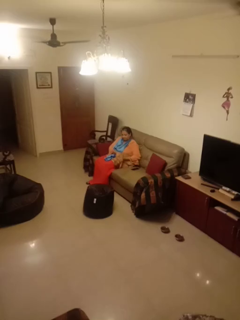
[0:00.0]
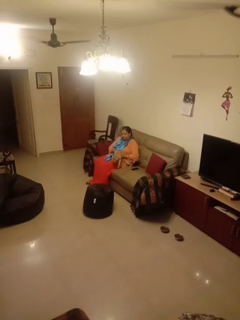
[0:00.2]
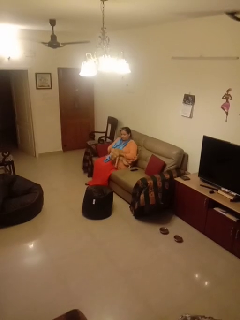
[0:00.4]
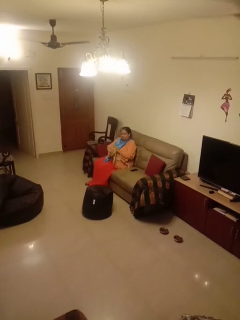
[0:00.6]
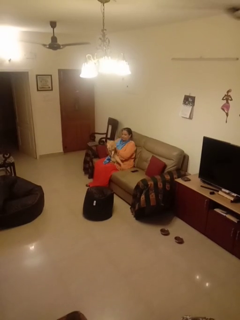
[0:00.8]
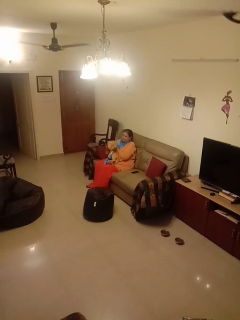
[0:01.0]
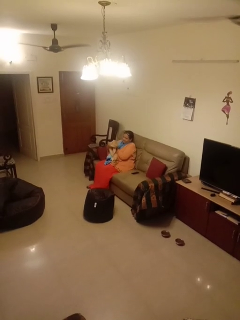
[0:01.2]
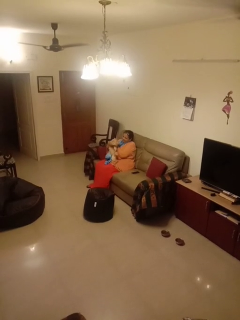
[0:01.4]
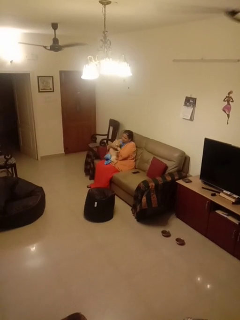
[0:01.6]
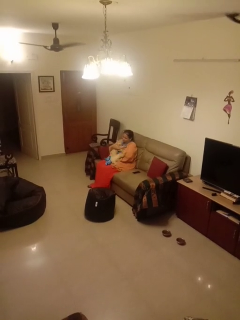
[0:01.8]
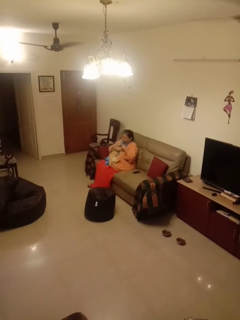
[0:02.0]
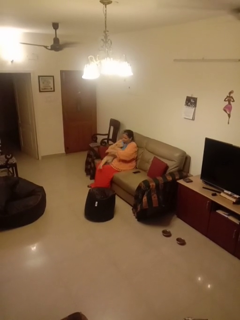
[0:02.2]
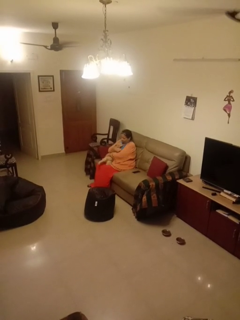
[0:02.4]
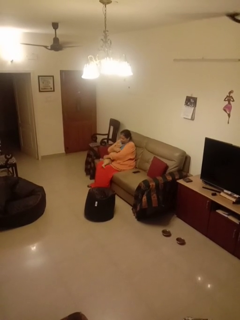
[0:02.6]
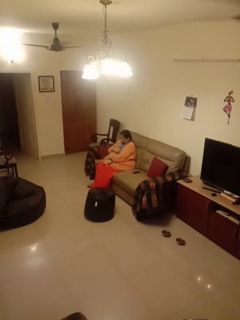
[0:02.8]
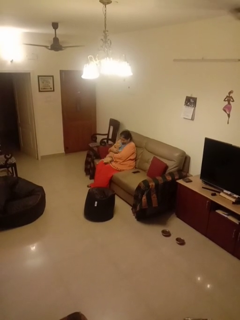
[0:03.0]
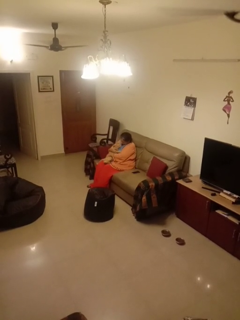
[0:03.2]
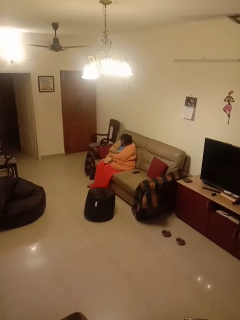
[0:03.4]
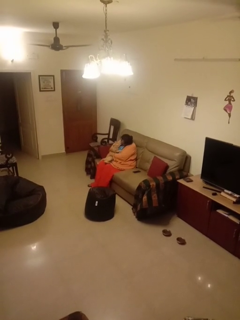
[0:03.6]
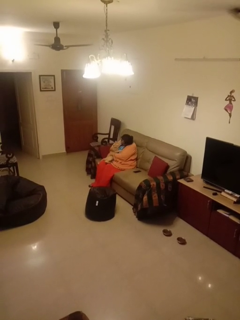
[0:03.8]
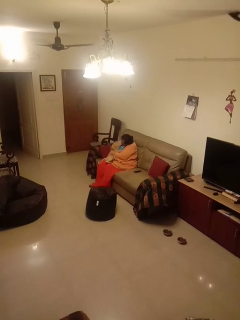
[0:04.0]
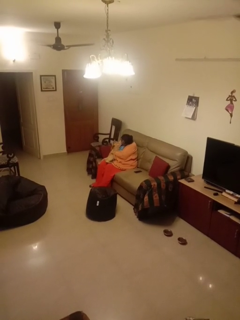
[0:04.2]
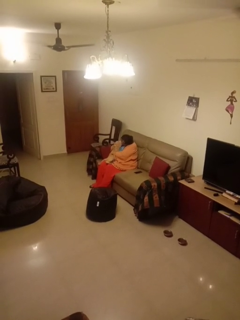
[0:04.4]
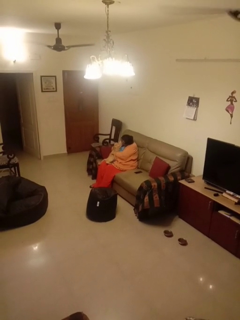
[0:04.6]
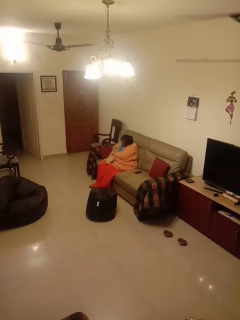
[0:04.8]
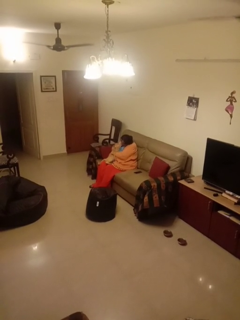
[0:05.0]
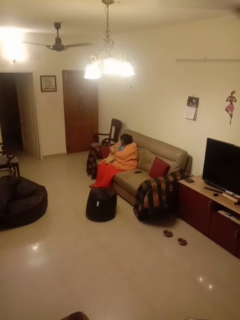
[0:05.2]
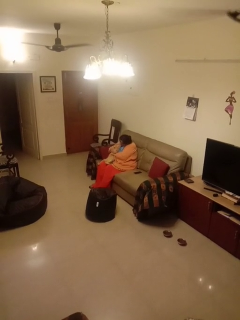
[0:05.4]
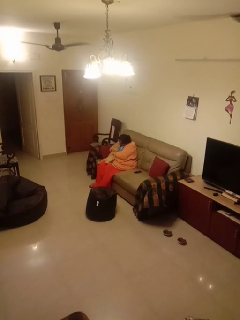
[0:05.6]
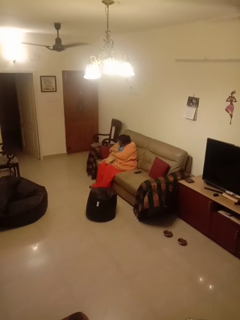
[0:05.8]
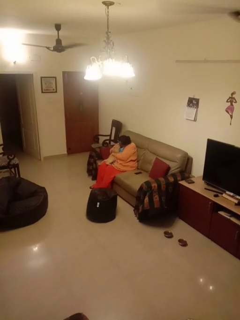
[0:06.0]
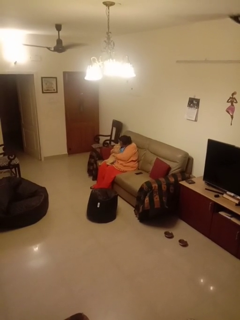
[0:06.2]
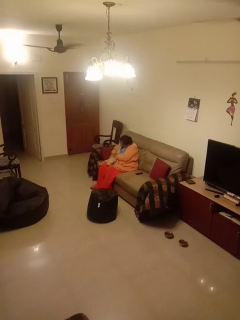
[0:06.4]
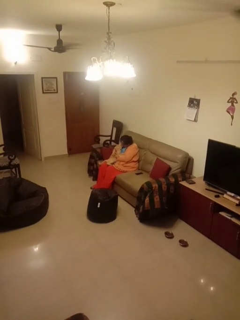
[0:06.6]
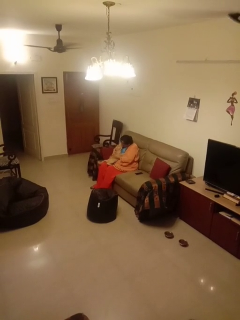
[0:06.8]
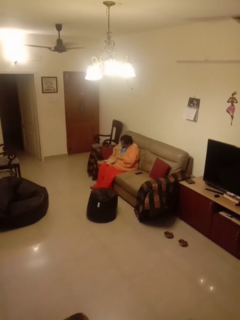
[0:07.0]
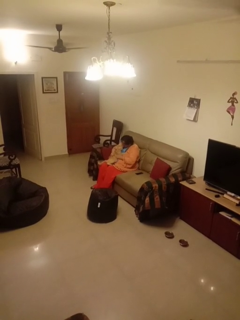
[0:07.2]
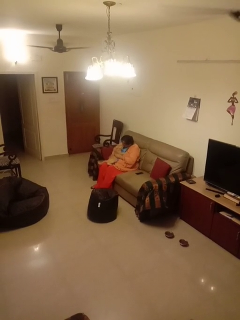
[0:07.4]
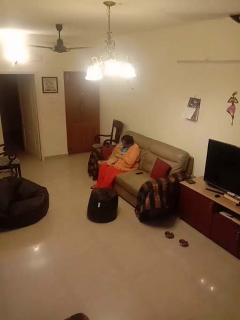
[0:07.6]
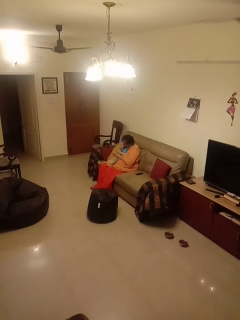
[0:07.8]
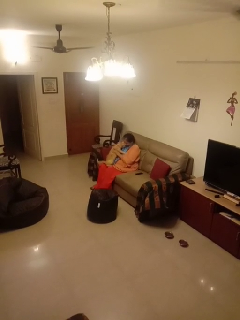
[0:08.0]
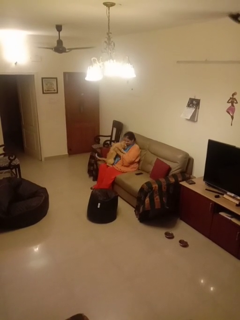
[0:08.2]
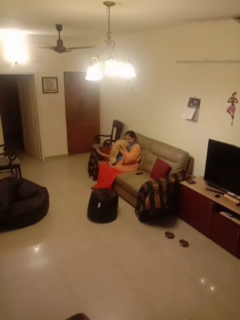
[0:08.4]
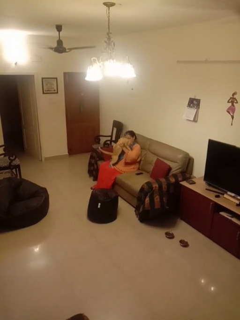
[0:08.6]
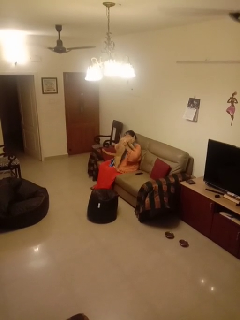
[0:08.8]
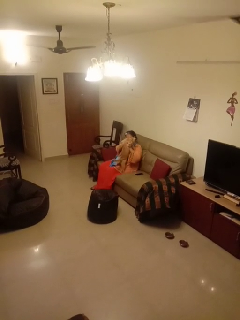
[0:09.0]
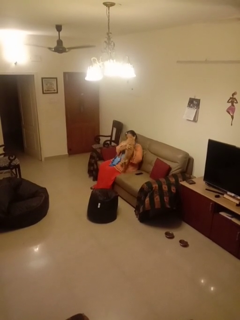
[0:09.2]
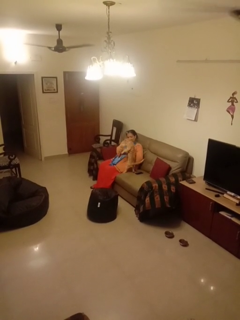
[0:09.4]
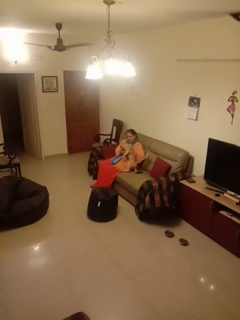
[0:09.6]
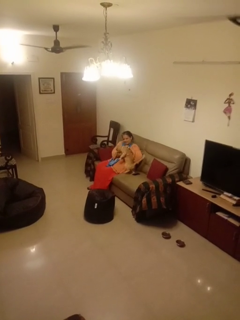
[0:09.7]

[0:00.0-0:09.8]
person hugs cat

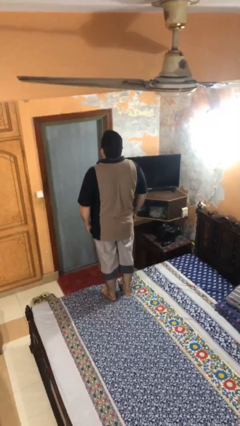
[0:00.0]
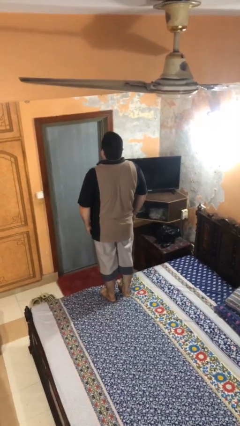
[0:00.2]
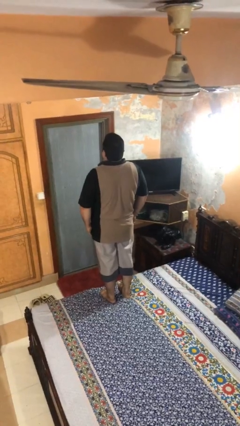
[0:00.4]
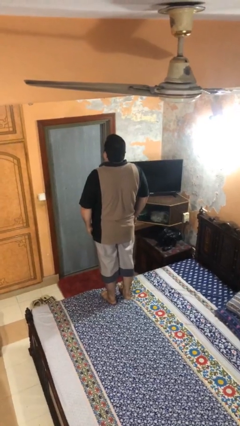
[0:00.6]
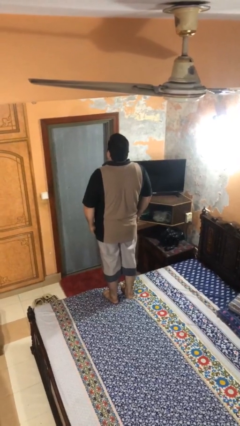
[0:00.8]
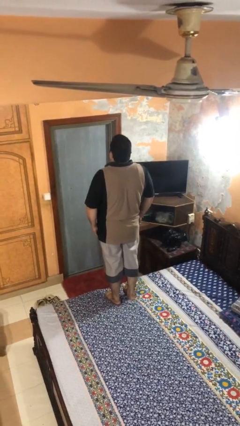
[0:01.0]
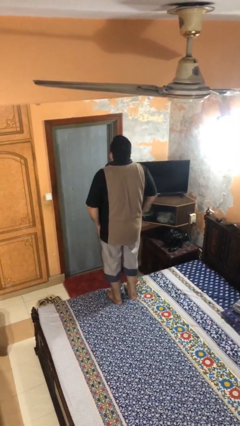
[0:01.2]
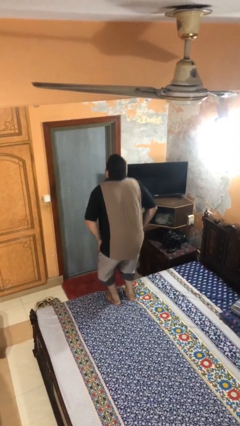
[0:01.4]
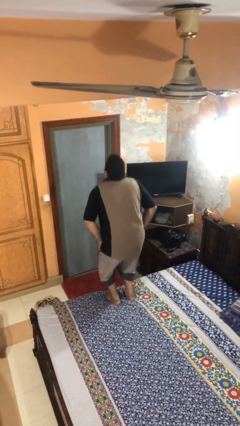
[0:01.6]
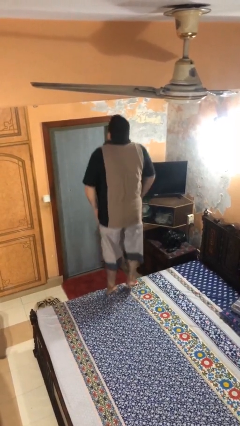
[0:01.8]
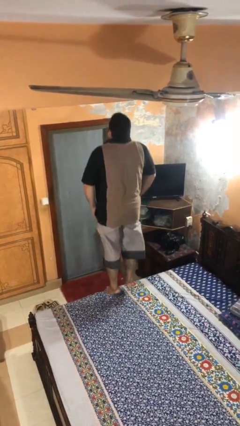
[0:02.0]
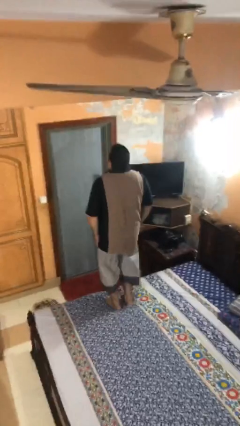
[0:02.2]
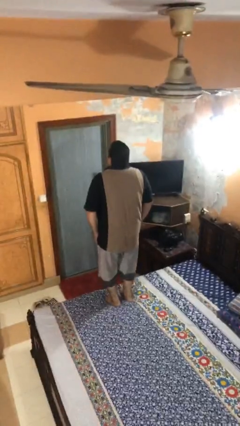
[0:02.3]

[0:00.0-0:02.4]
person jumps on bed

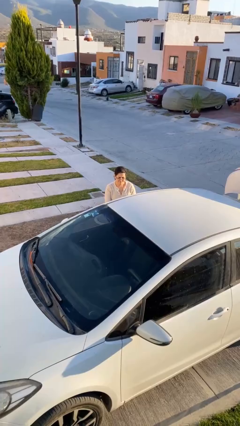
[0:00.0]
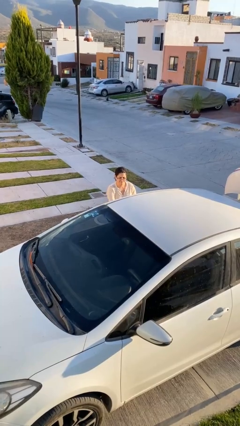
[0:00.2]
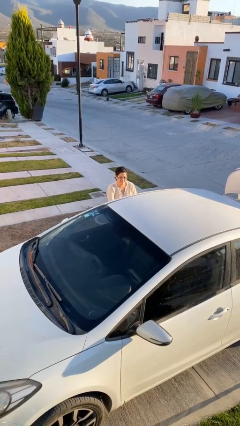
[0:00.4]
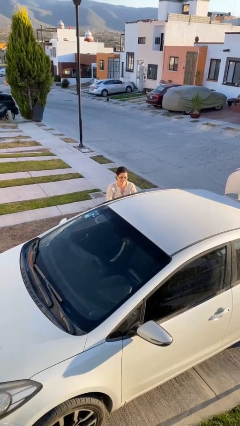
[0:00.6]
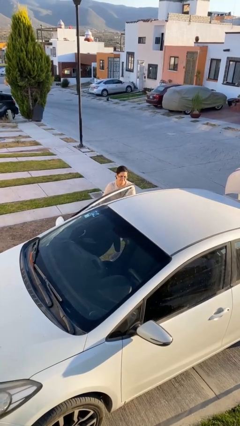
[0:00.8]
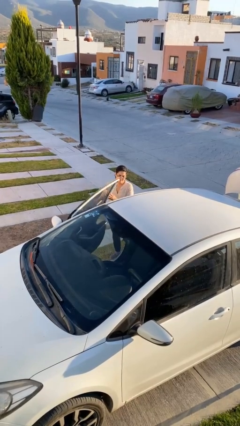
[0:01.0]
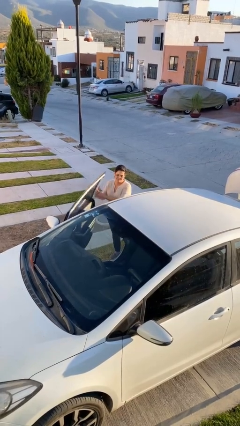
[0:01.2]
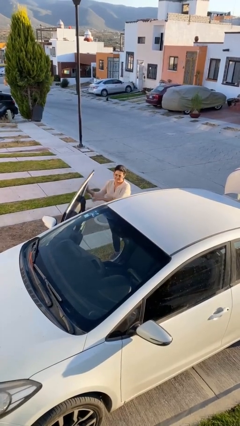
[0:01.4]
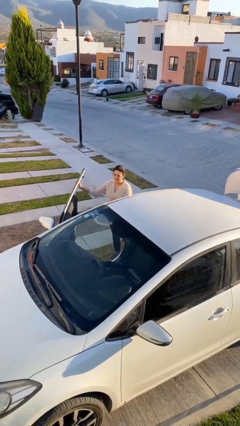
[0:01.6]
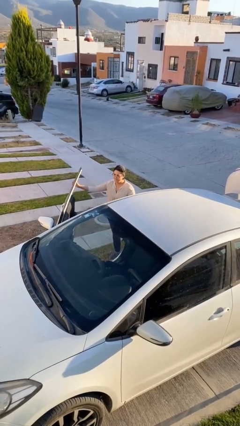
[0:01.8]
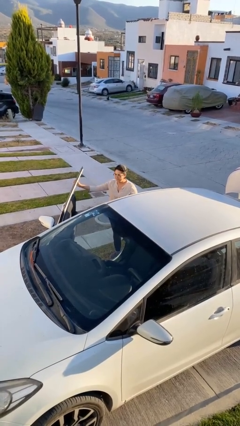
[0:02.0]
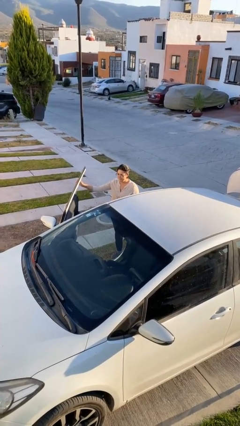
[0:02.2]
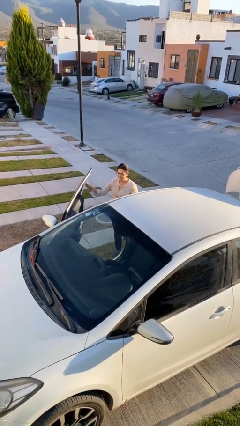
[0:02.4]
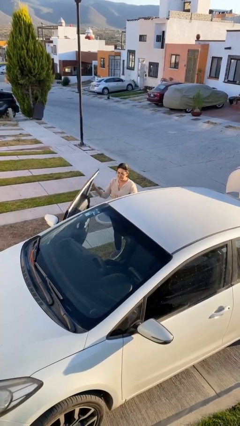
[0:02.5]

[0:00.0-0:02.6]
person opens car door

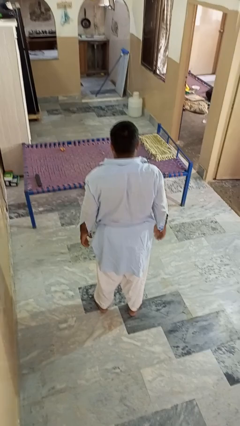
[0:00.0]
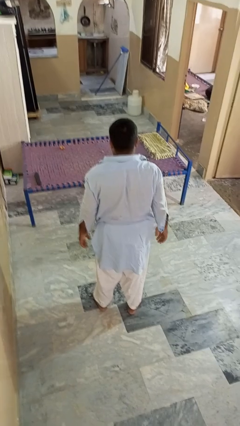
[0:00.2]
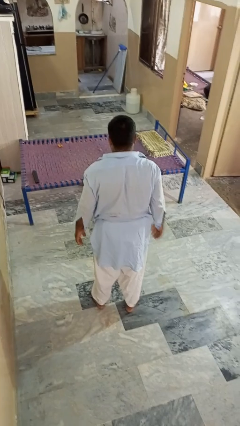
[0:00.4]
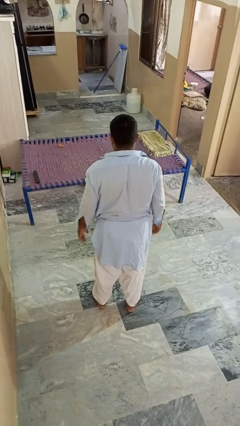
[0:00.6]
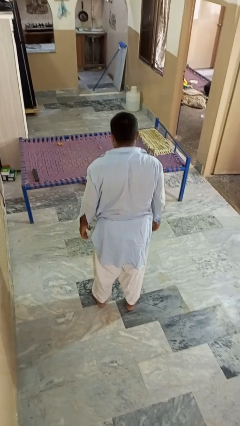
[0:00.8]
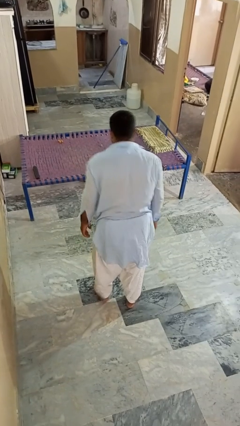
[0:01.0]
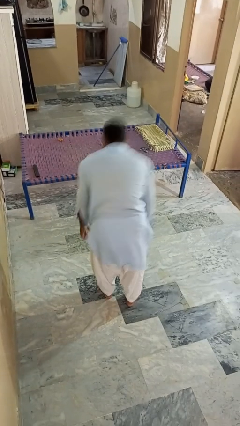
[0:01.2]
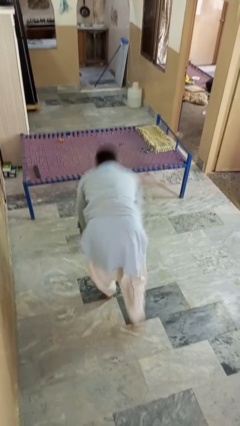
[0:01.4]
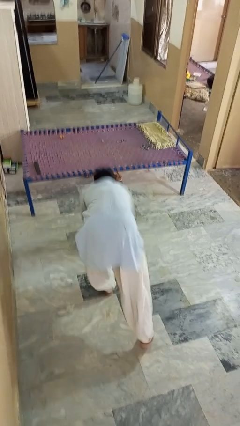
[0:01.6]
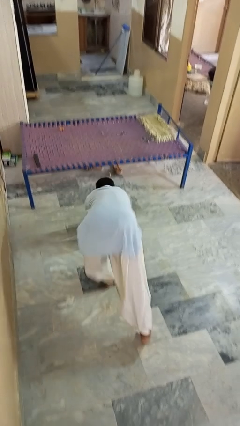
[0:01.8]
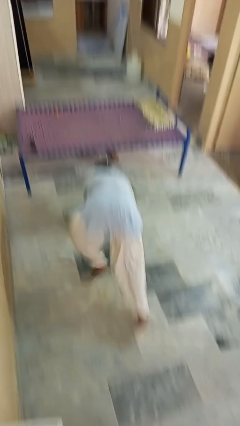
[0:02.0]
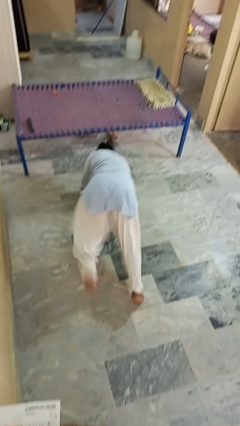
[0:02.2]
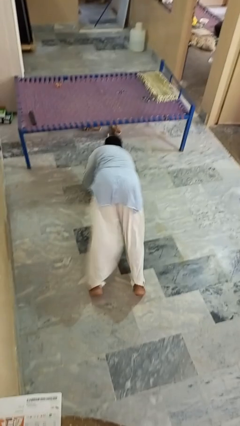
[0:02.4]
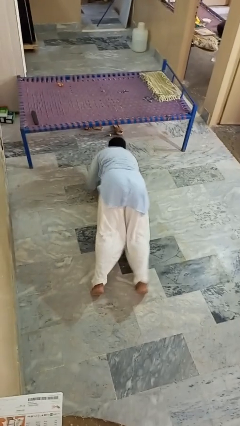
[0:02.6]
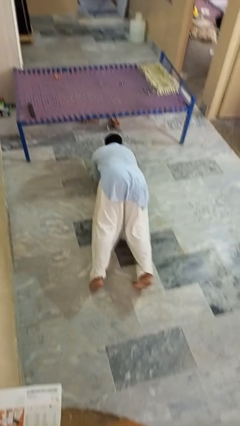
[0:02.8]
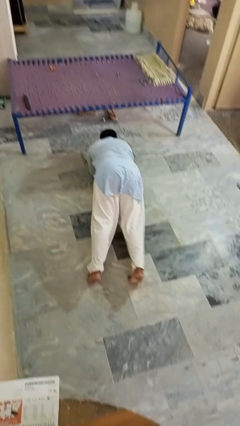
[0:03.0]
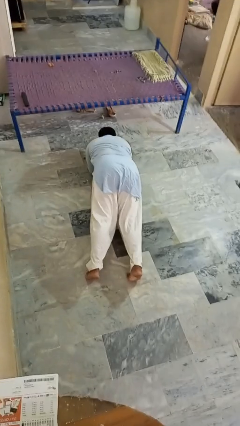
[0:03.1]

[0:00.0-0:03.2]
person exercises with plank

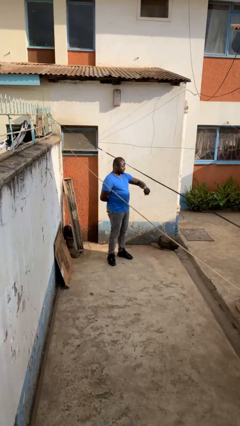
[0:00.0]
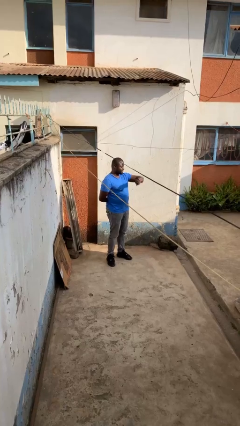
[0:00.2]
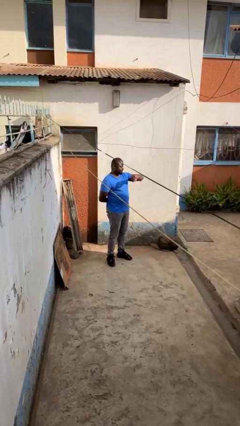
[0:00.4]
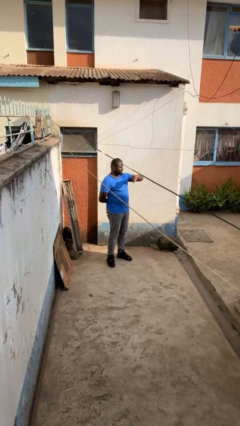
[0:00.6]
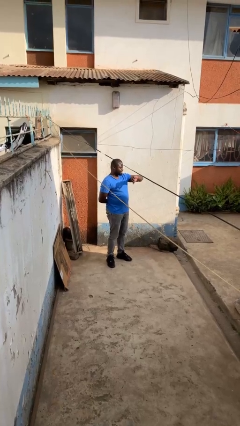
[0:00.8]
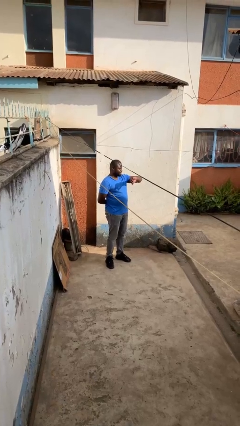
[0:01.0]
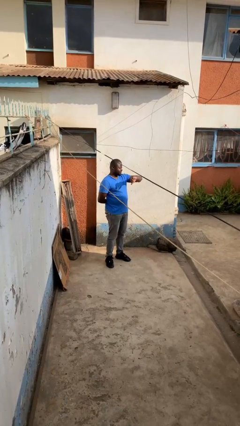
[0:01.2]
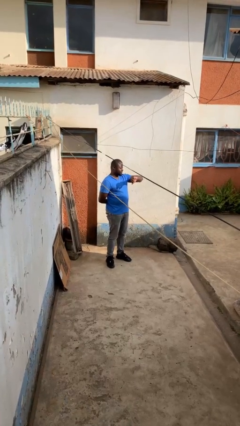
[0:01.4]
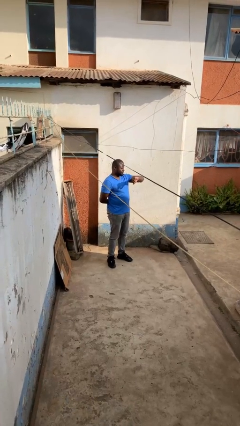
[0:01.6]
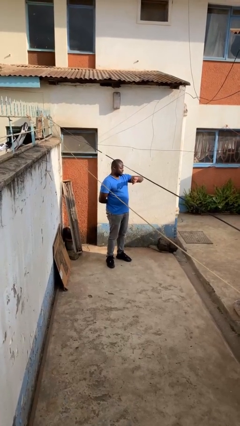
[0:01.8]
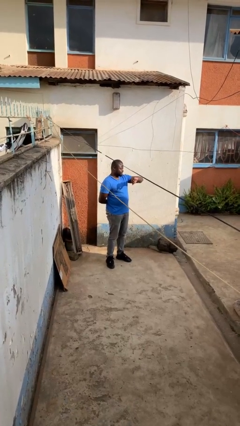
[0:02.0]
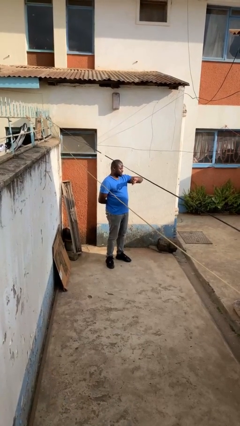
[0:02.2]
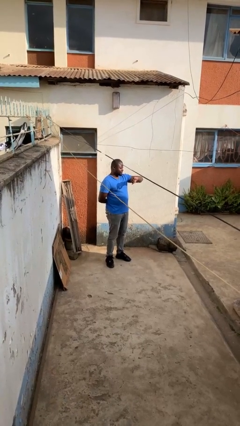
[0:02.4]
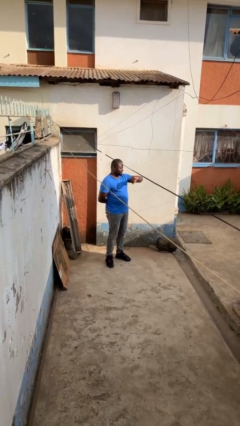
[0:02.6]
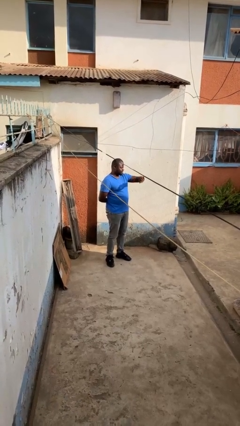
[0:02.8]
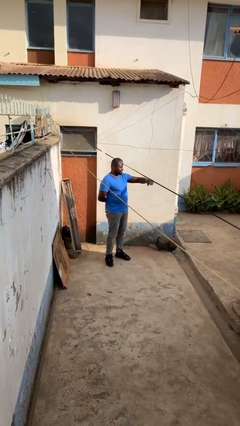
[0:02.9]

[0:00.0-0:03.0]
person looks at wristwatch